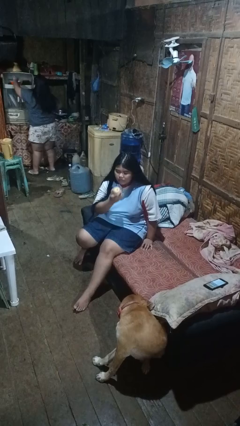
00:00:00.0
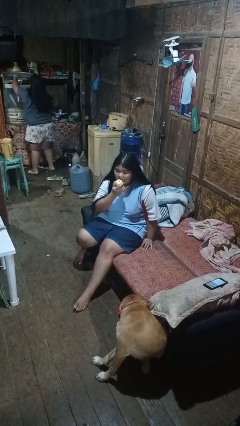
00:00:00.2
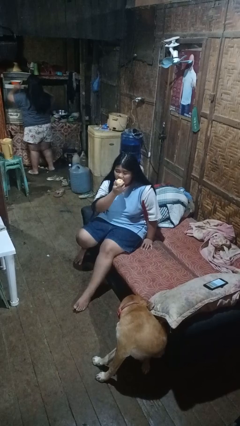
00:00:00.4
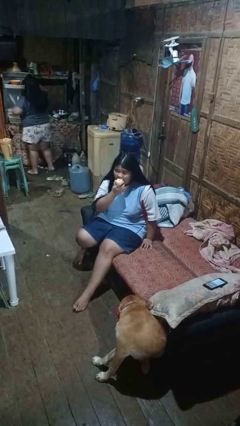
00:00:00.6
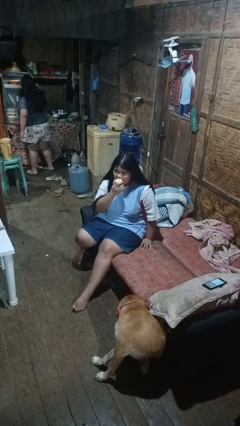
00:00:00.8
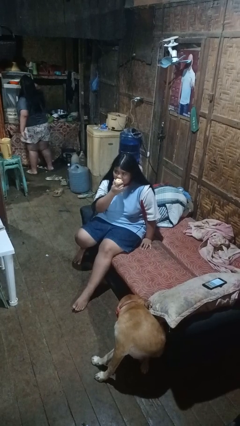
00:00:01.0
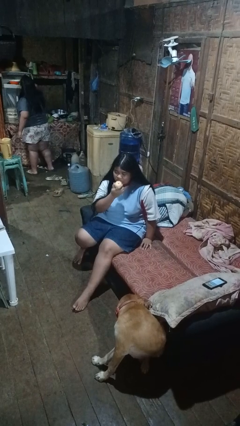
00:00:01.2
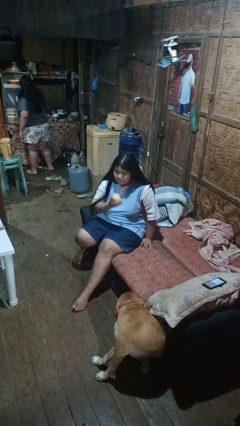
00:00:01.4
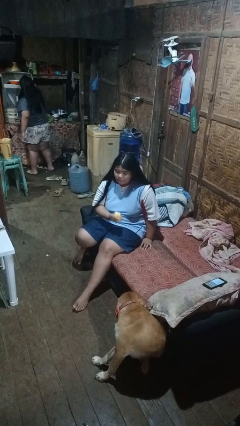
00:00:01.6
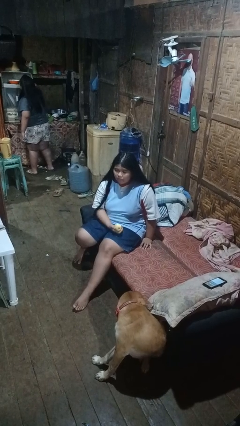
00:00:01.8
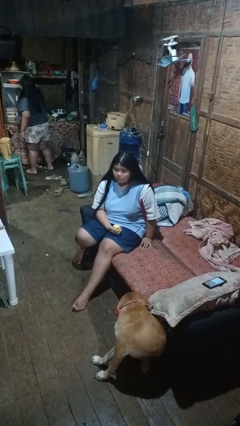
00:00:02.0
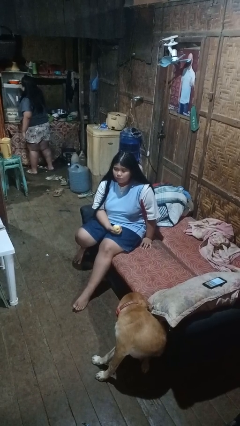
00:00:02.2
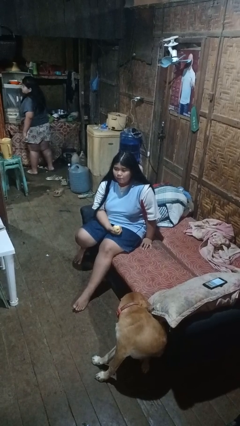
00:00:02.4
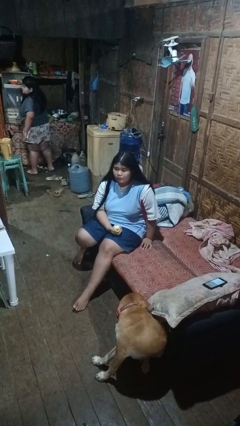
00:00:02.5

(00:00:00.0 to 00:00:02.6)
person eats apple

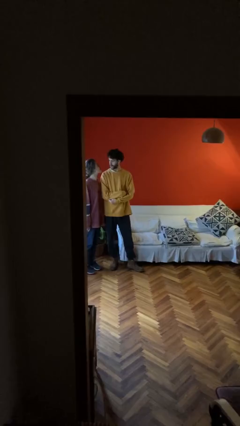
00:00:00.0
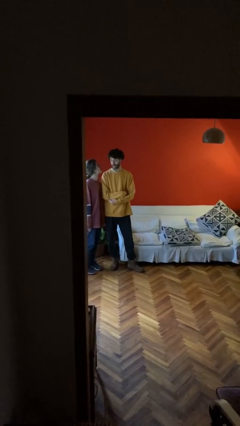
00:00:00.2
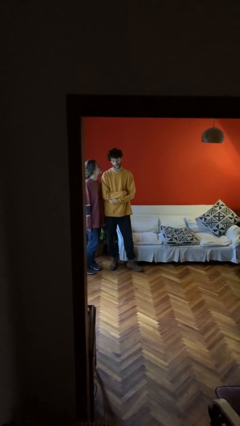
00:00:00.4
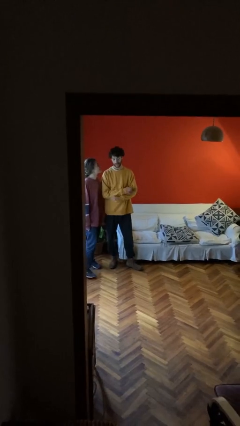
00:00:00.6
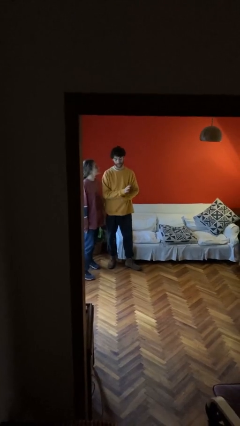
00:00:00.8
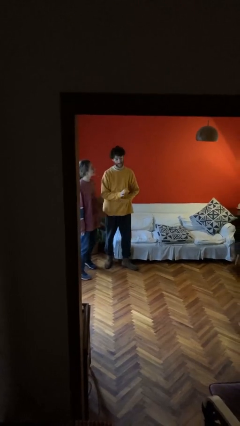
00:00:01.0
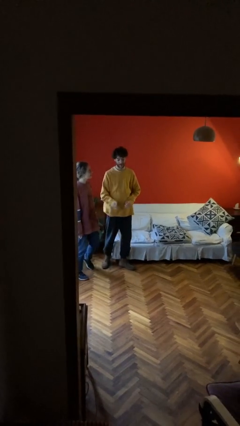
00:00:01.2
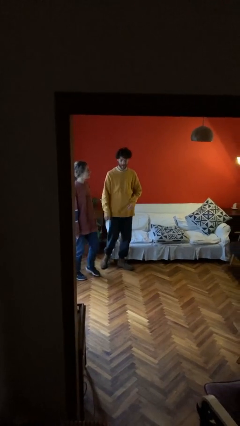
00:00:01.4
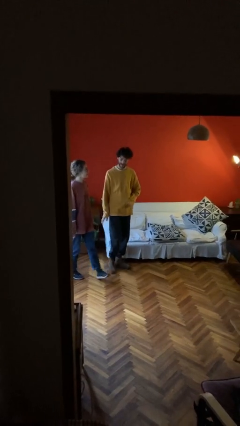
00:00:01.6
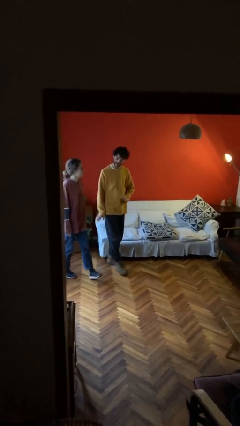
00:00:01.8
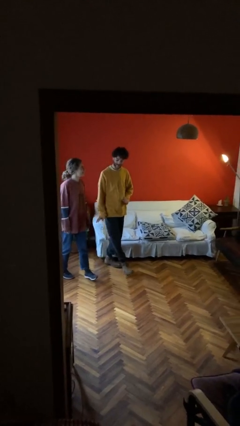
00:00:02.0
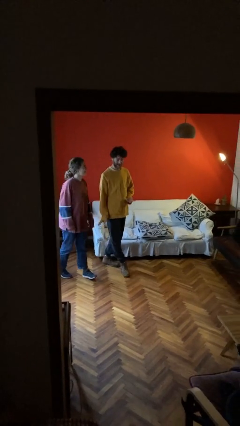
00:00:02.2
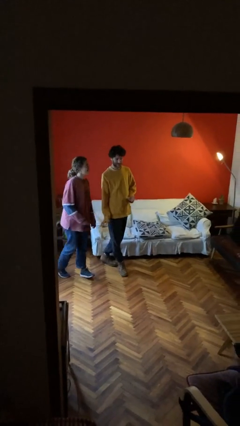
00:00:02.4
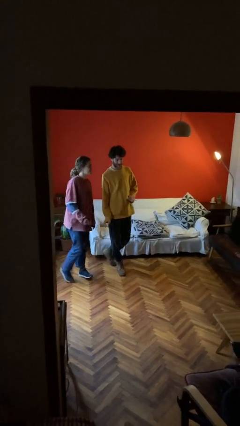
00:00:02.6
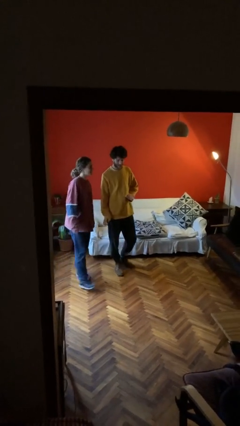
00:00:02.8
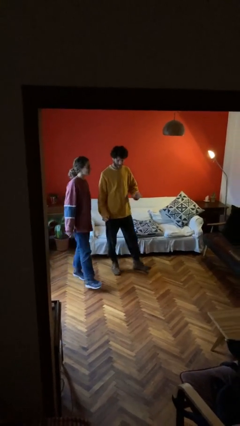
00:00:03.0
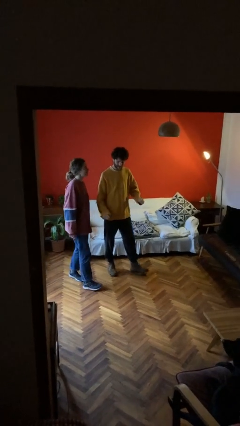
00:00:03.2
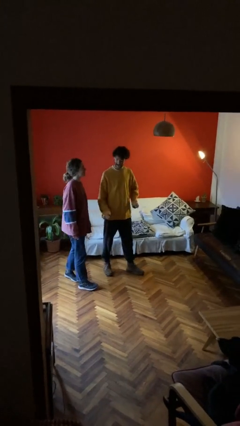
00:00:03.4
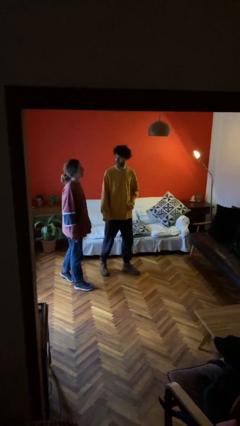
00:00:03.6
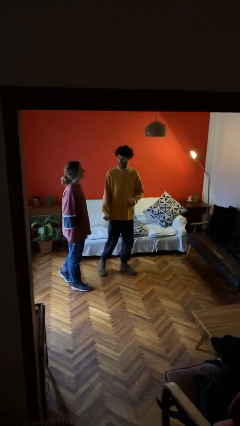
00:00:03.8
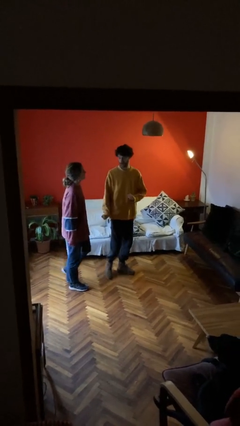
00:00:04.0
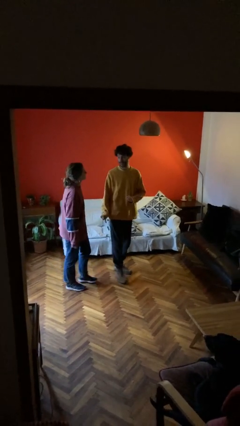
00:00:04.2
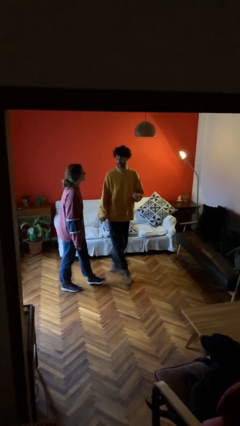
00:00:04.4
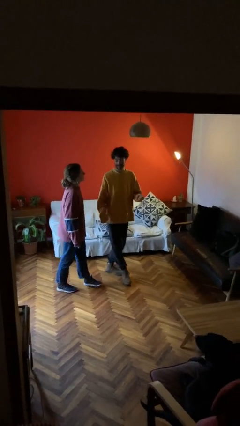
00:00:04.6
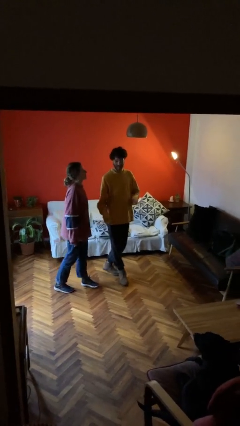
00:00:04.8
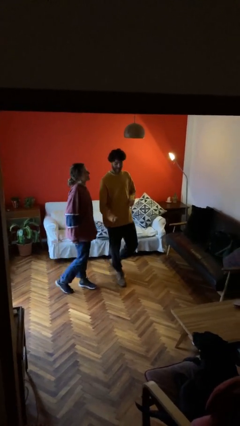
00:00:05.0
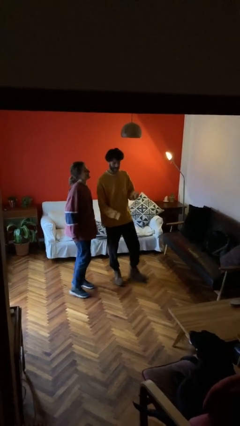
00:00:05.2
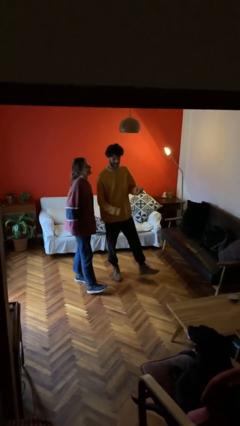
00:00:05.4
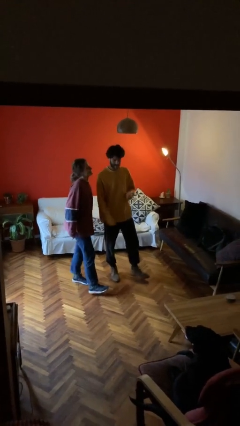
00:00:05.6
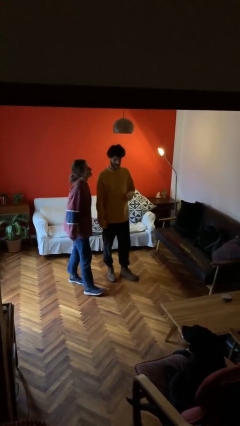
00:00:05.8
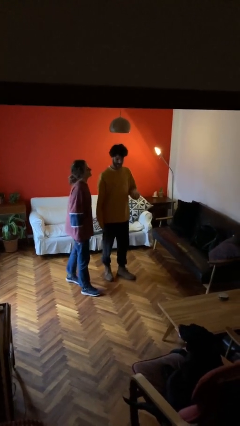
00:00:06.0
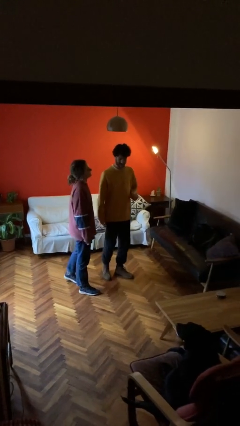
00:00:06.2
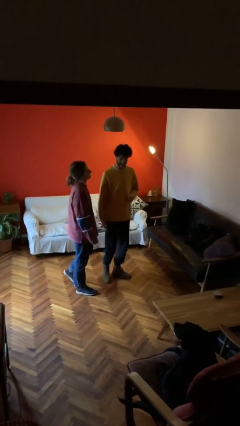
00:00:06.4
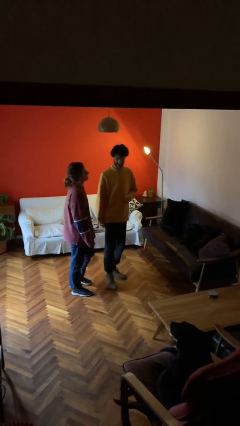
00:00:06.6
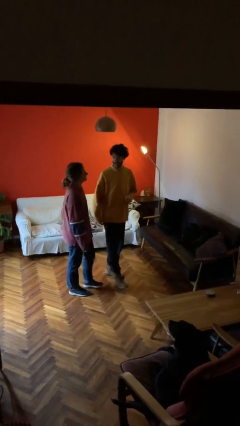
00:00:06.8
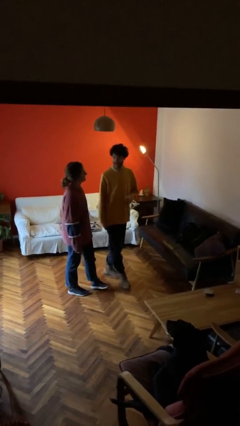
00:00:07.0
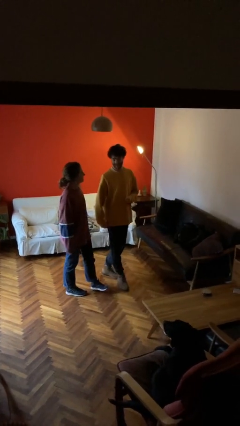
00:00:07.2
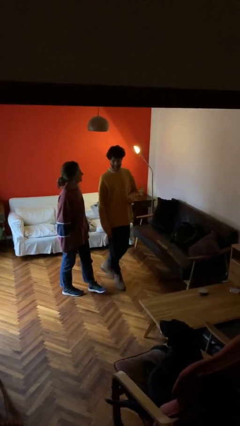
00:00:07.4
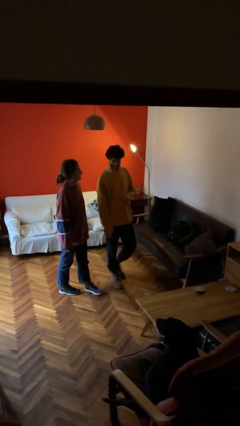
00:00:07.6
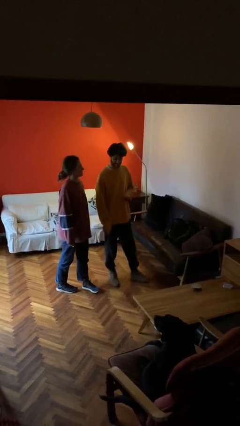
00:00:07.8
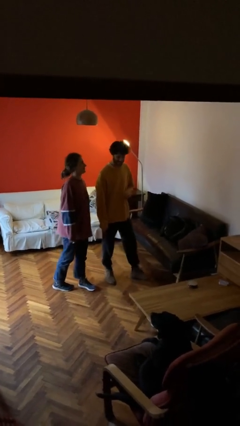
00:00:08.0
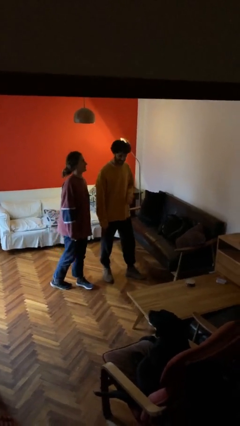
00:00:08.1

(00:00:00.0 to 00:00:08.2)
person talks to person

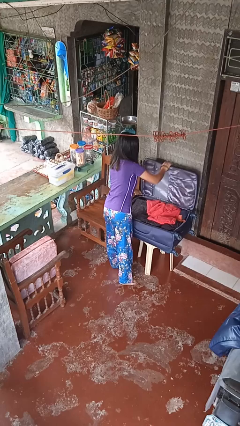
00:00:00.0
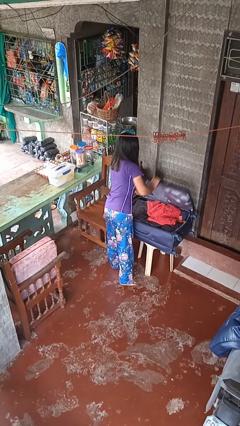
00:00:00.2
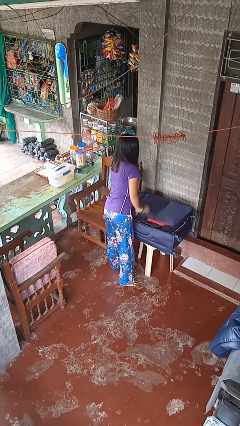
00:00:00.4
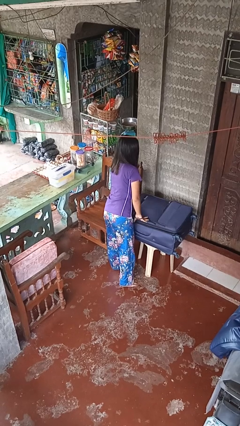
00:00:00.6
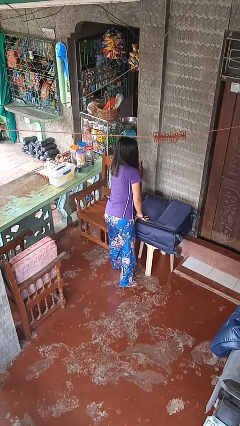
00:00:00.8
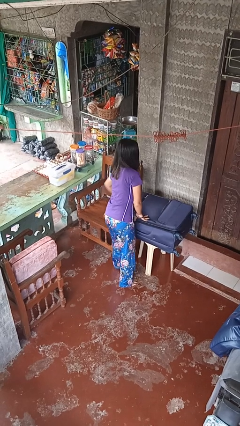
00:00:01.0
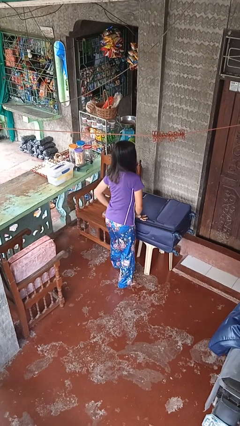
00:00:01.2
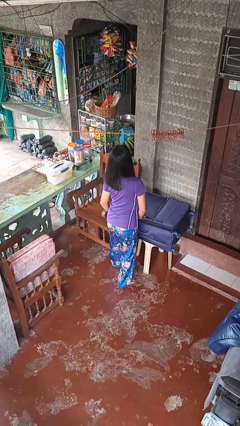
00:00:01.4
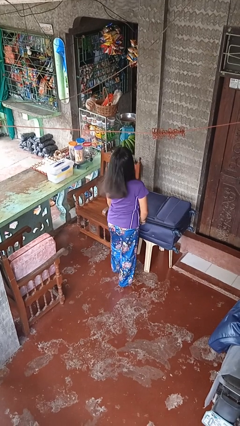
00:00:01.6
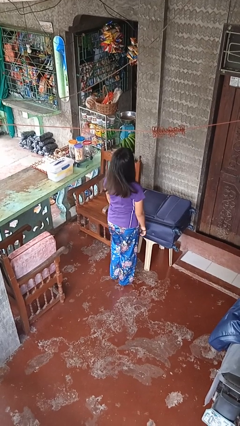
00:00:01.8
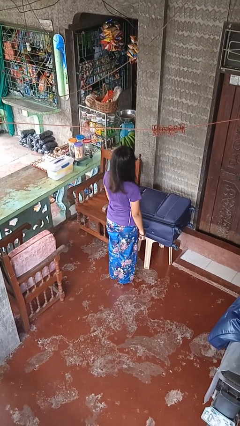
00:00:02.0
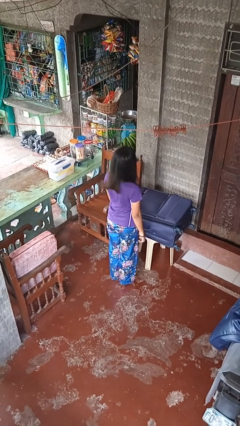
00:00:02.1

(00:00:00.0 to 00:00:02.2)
person closes suitcase

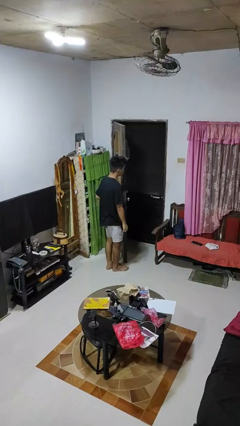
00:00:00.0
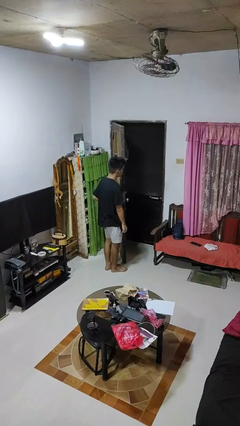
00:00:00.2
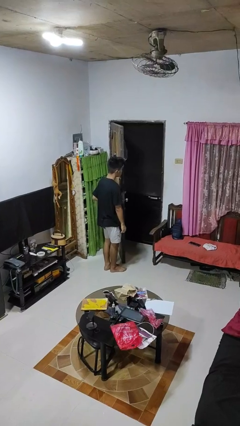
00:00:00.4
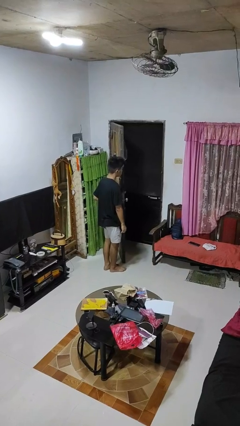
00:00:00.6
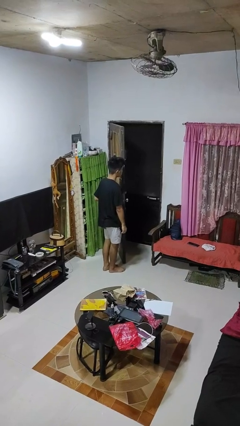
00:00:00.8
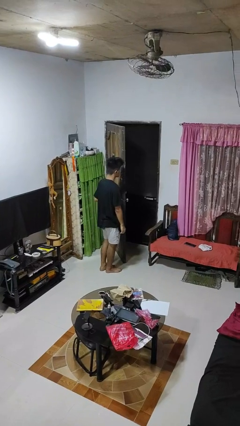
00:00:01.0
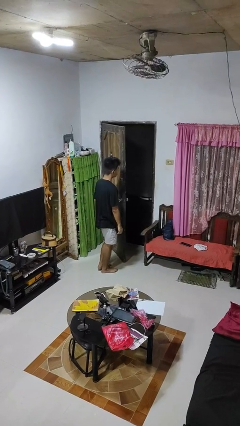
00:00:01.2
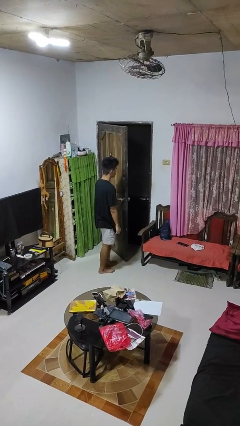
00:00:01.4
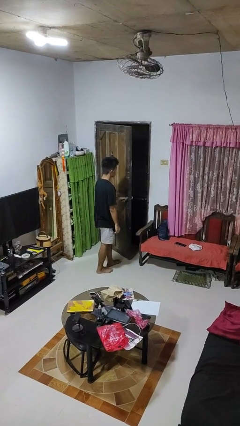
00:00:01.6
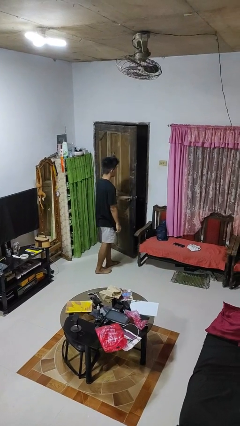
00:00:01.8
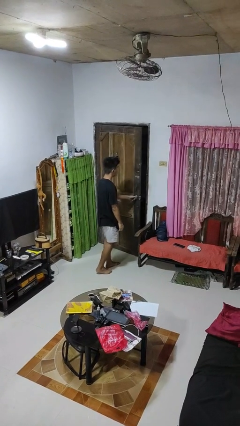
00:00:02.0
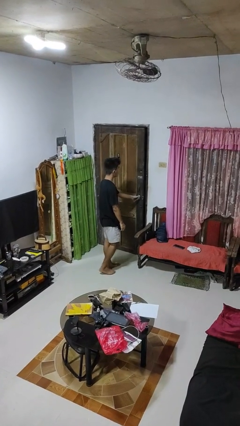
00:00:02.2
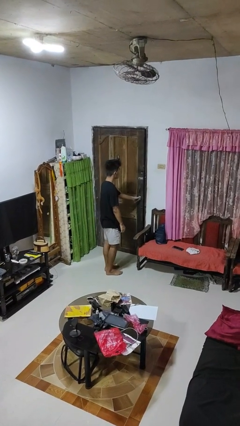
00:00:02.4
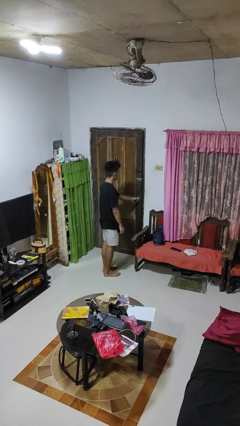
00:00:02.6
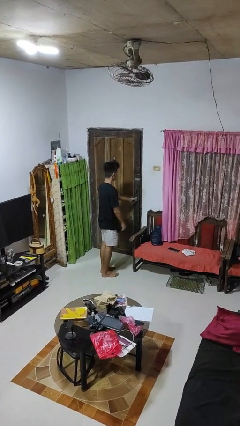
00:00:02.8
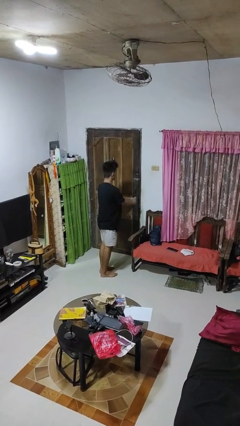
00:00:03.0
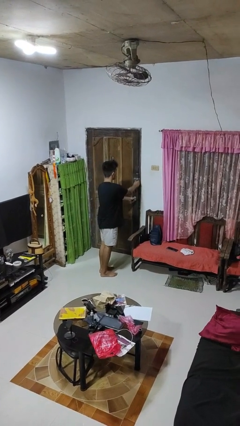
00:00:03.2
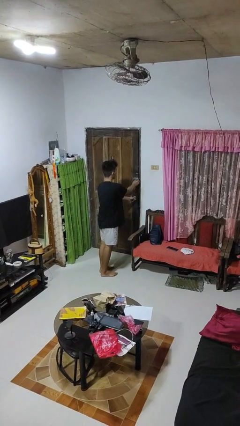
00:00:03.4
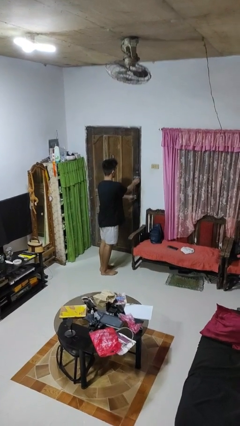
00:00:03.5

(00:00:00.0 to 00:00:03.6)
person closes facility door

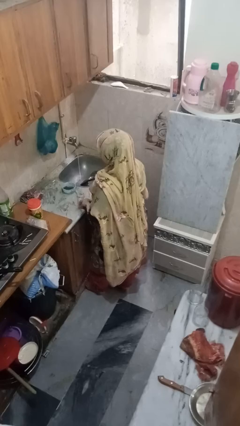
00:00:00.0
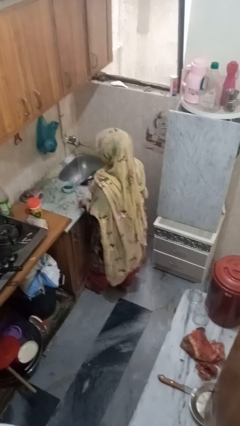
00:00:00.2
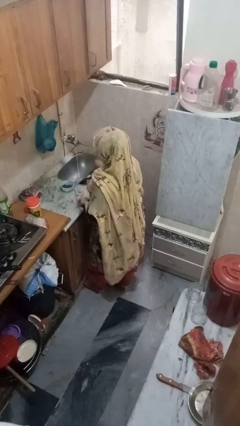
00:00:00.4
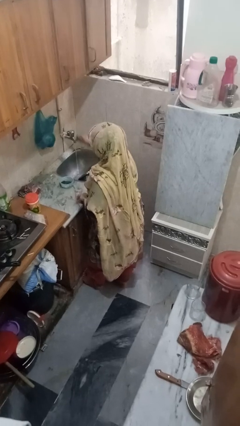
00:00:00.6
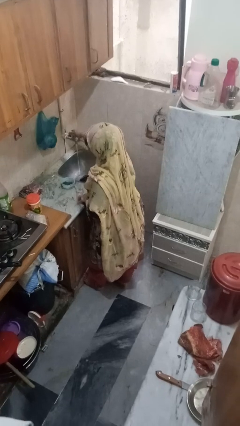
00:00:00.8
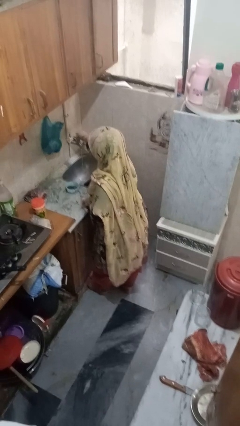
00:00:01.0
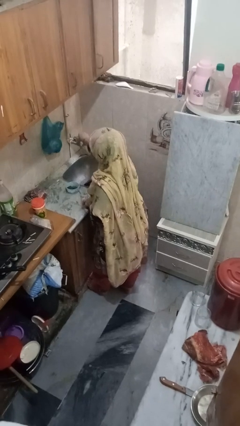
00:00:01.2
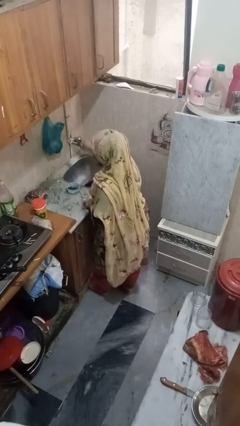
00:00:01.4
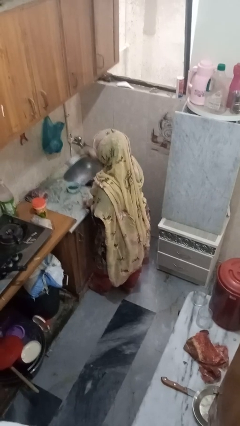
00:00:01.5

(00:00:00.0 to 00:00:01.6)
person turns off faucet
